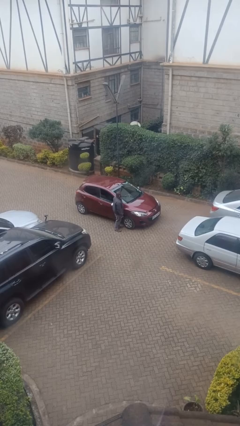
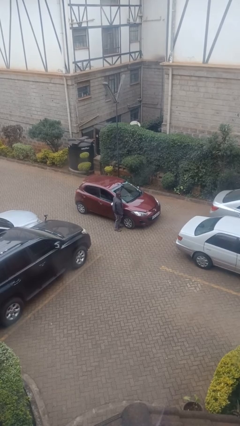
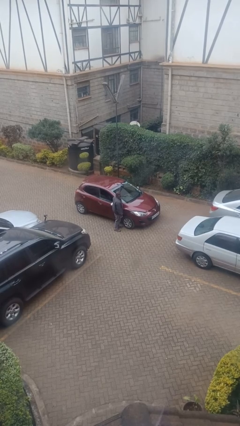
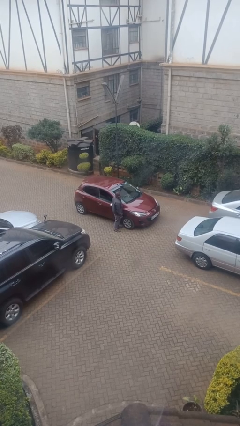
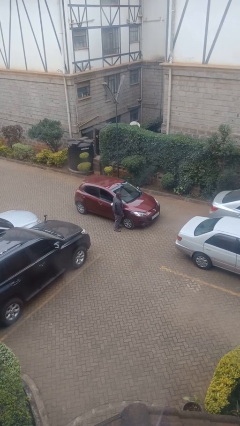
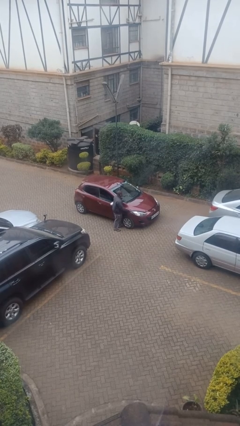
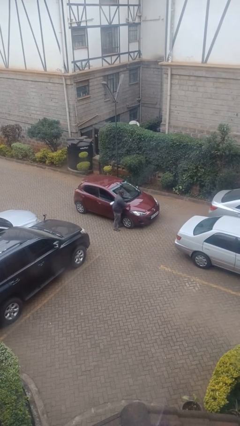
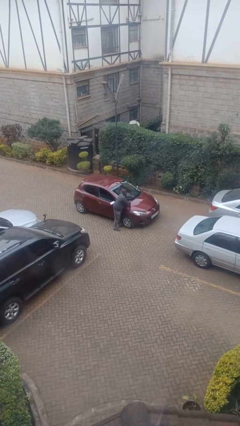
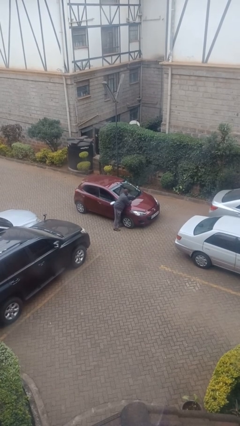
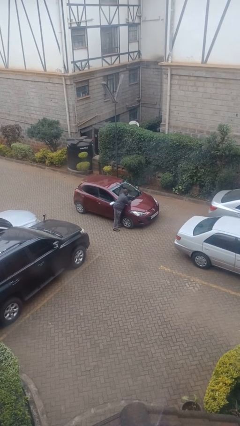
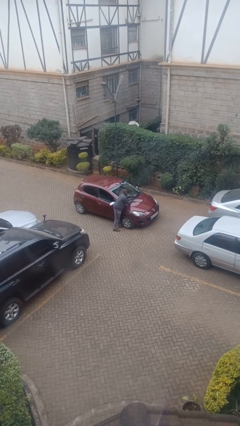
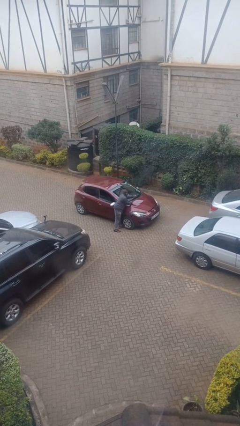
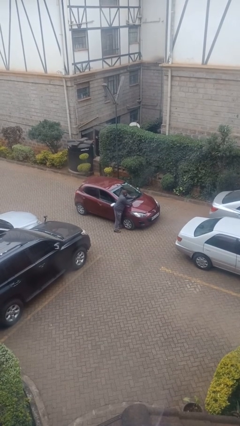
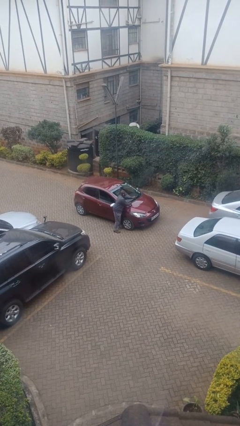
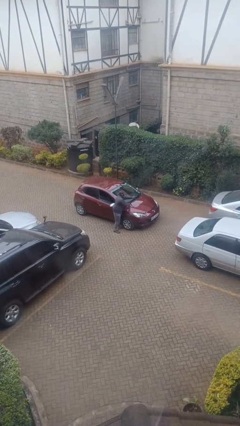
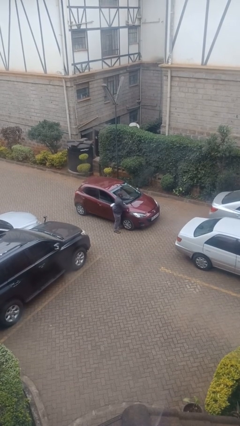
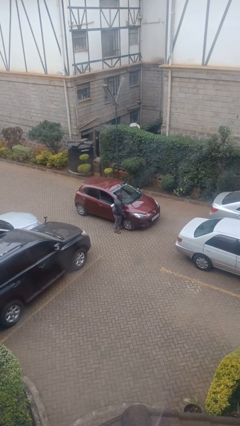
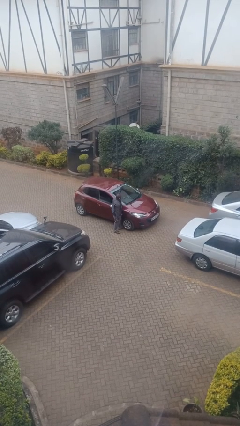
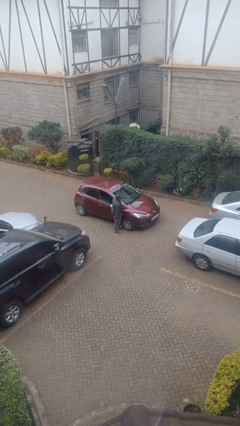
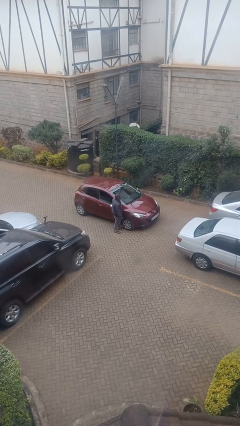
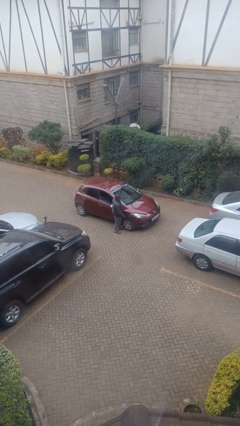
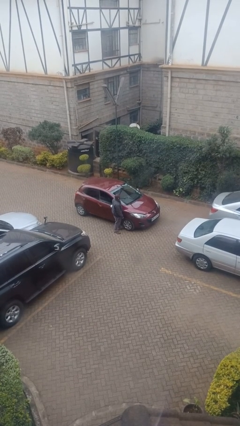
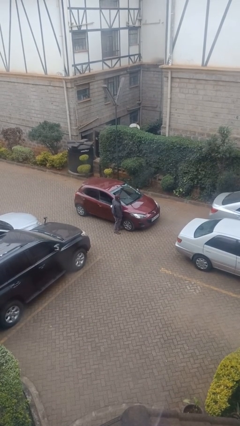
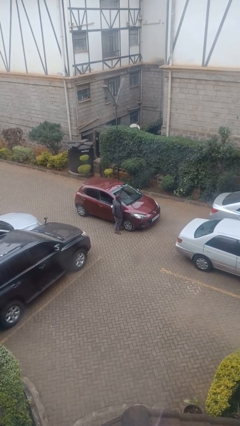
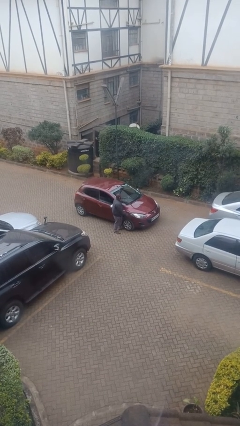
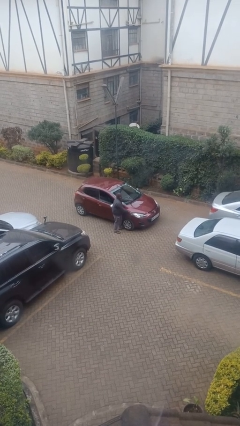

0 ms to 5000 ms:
person flips up car wipers

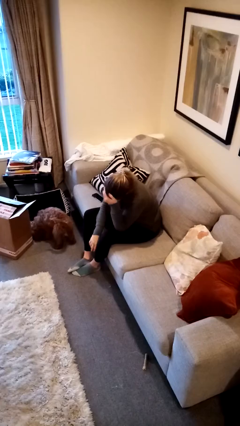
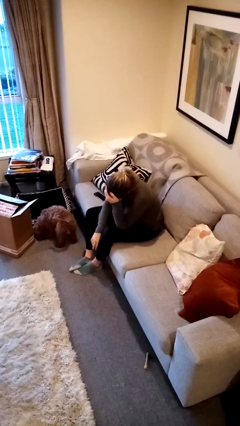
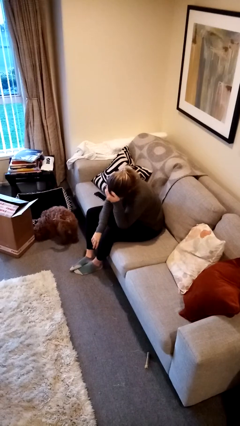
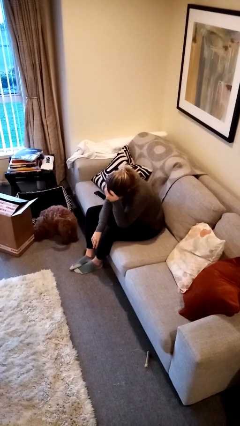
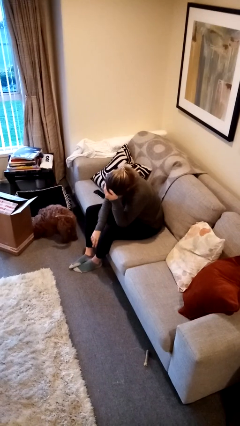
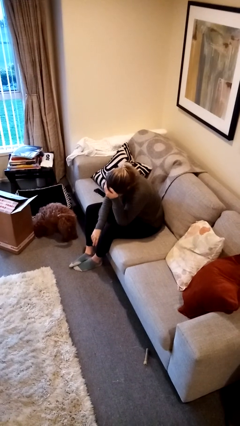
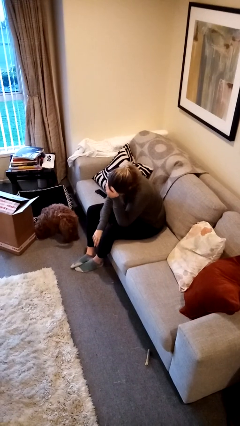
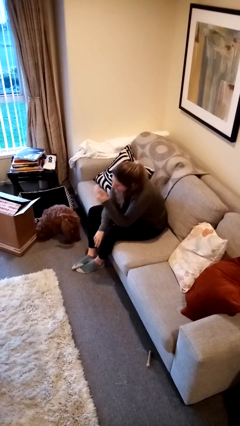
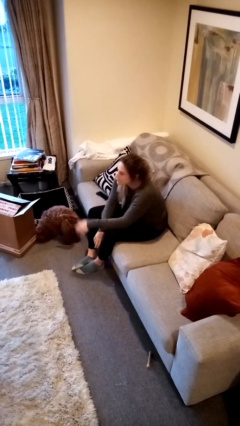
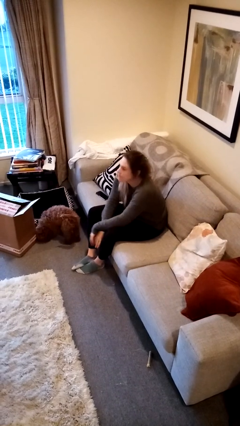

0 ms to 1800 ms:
person covers face with hands

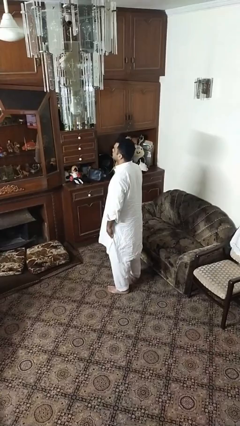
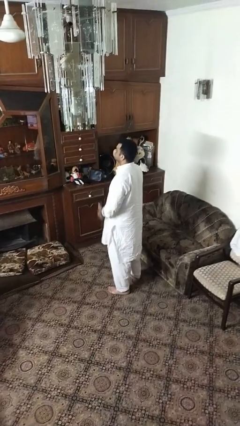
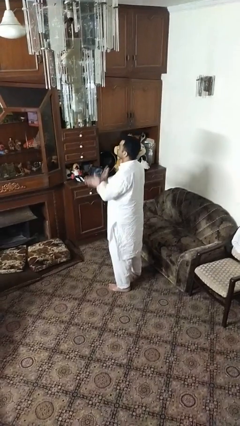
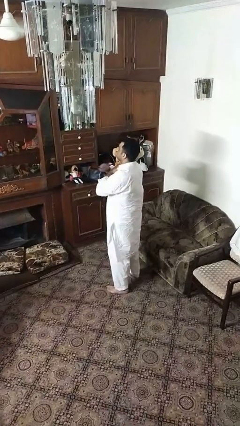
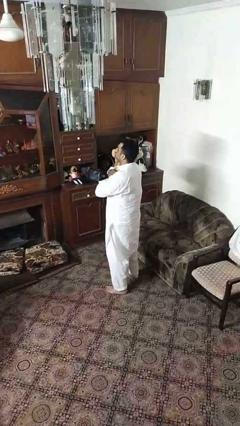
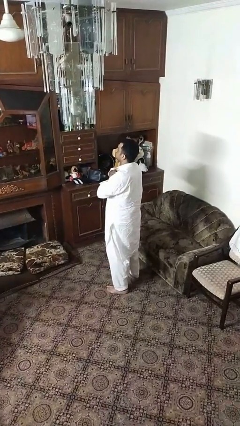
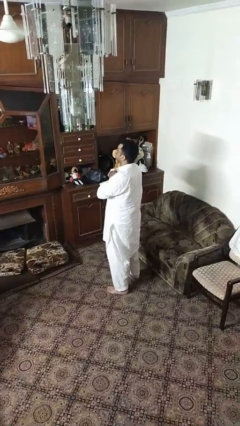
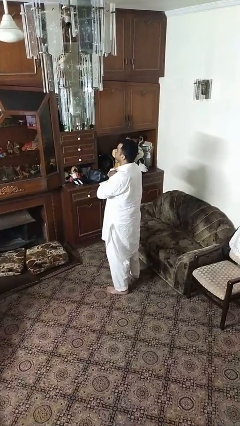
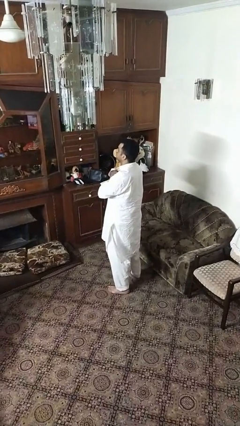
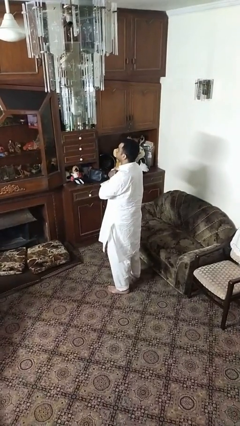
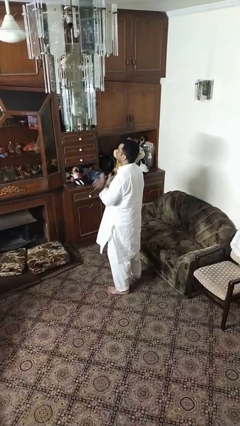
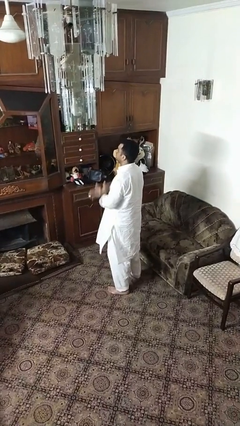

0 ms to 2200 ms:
person gestures arms x

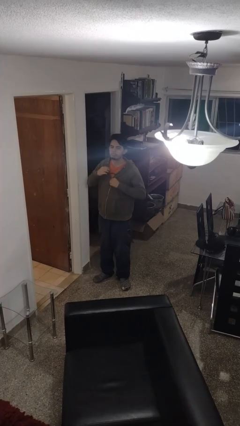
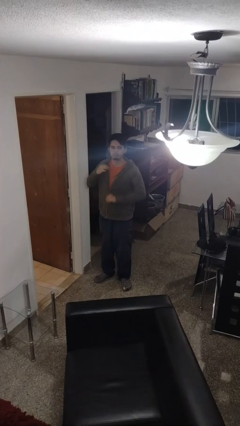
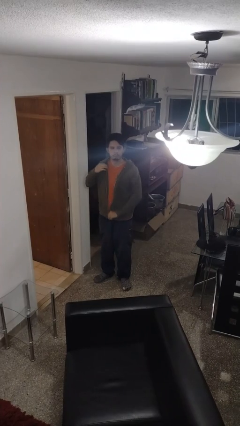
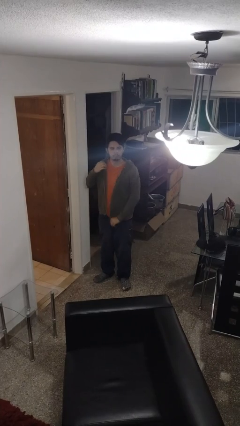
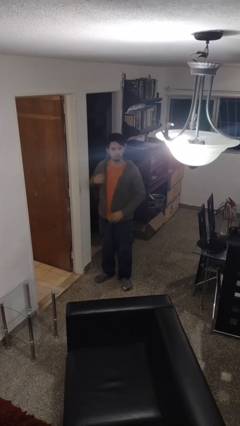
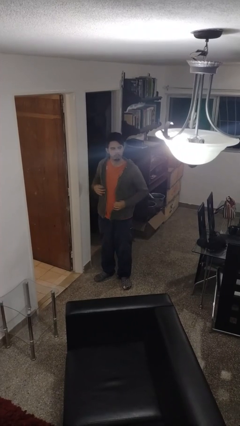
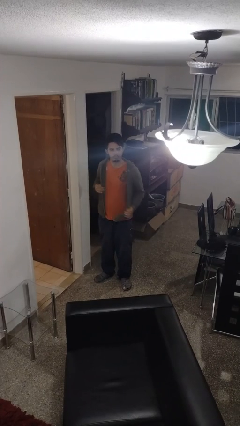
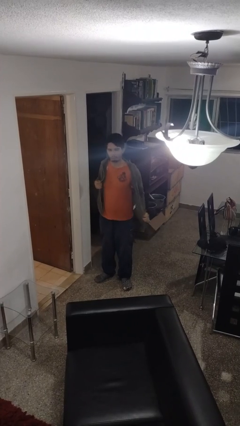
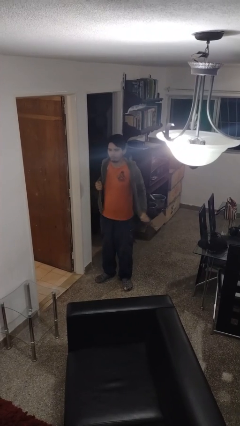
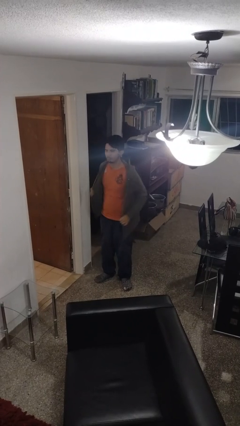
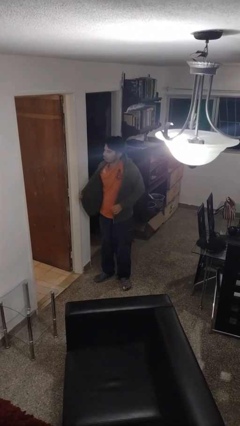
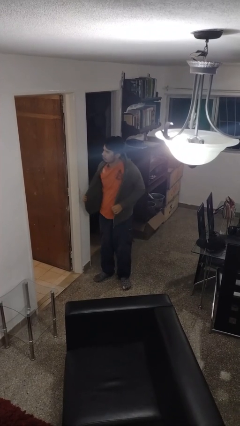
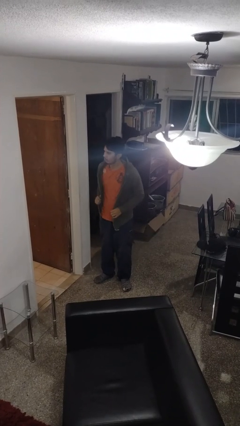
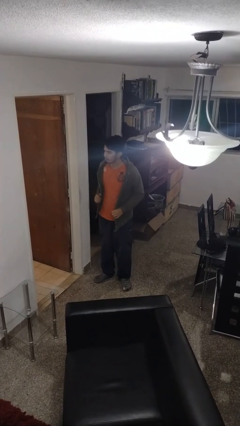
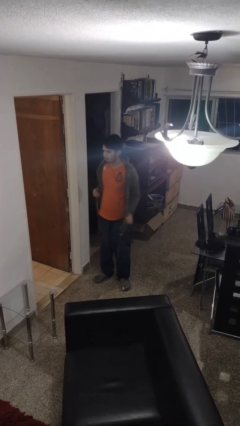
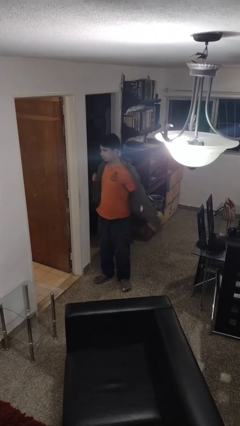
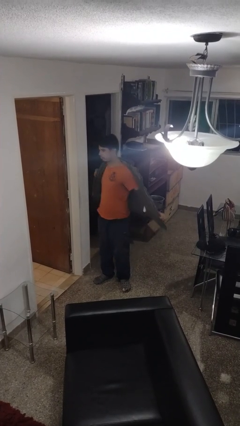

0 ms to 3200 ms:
person unzips jacket

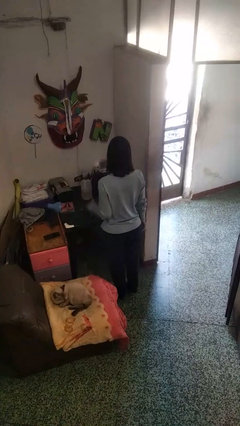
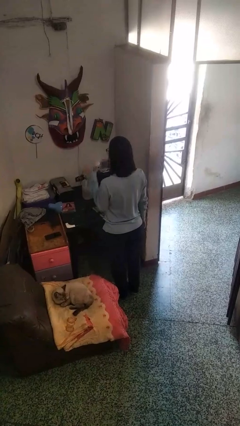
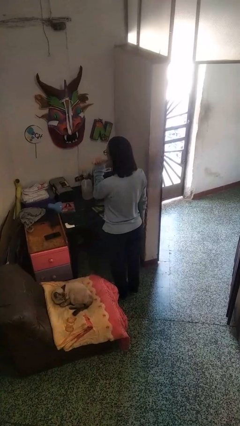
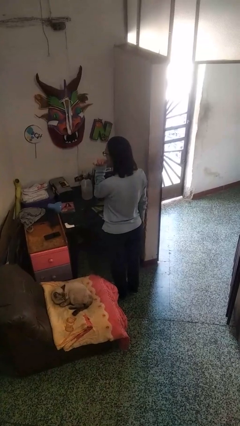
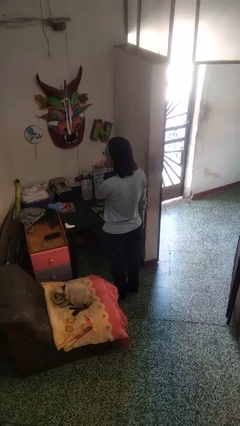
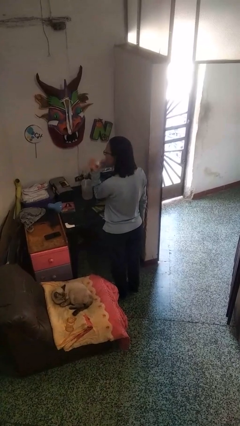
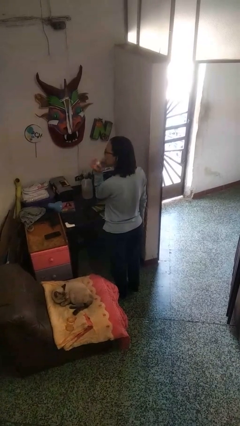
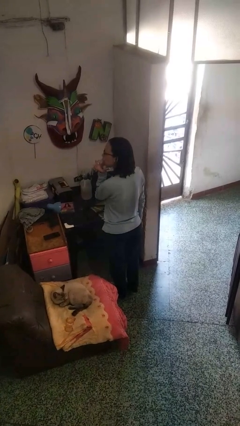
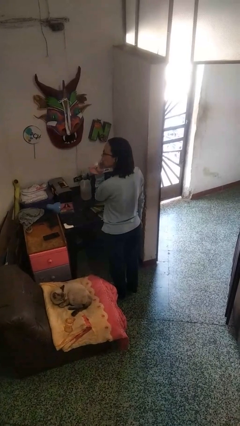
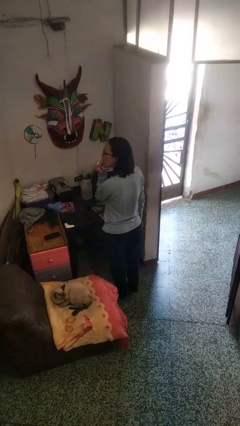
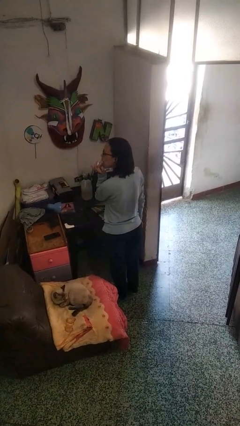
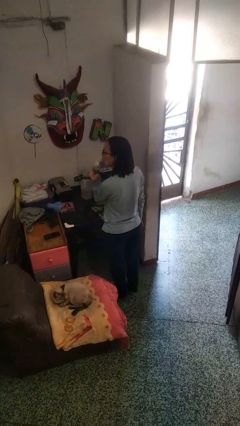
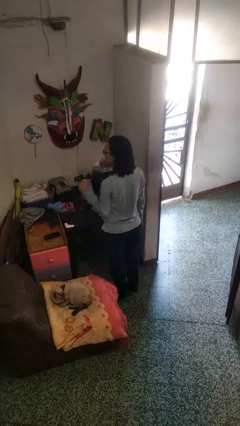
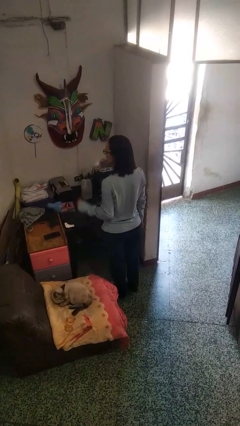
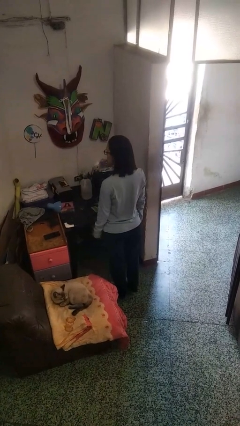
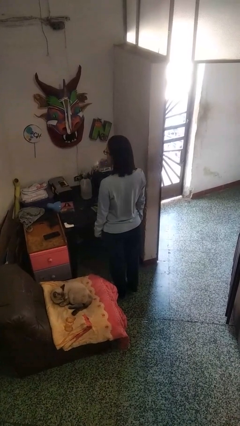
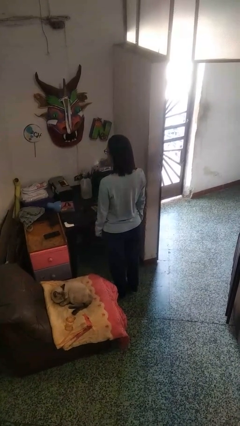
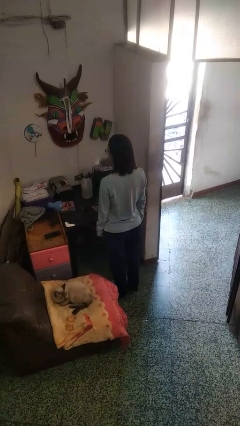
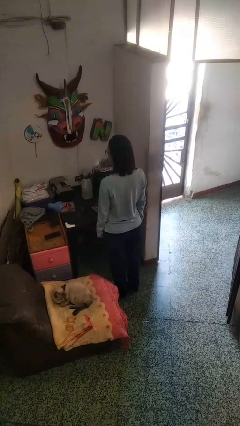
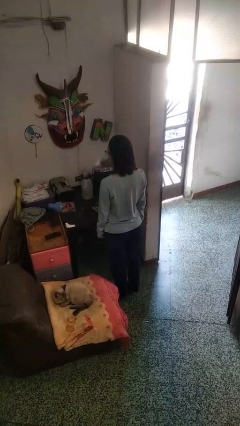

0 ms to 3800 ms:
person licks fingers

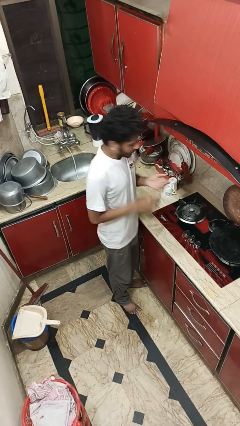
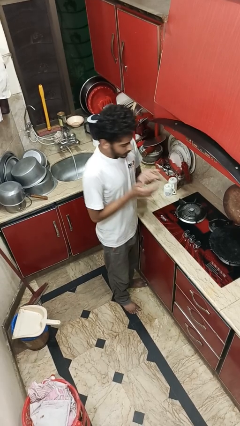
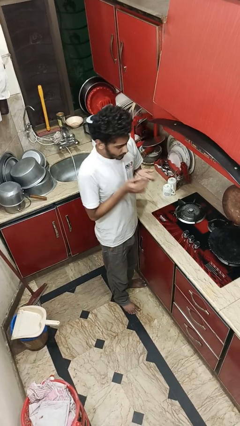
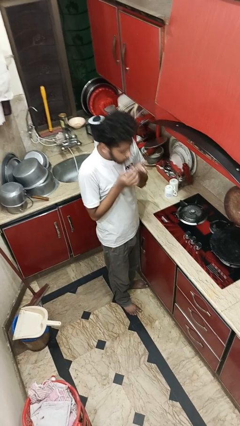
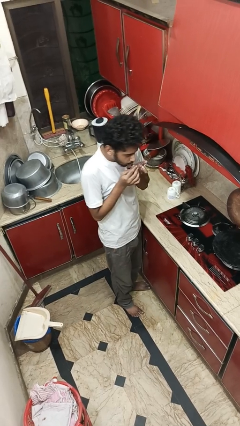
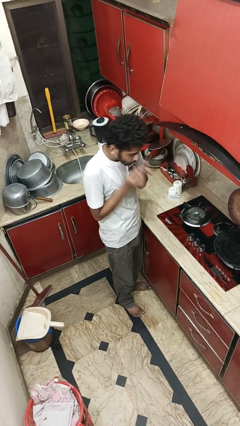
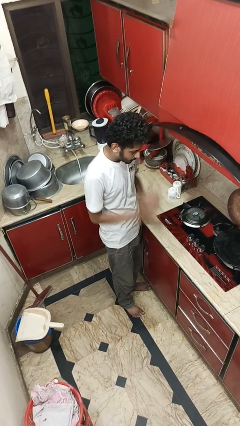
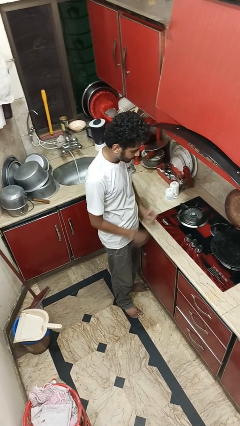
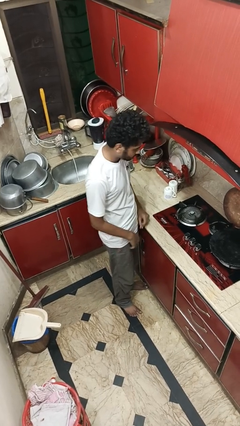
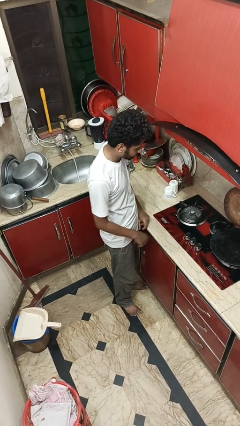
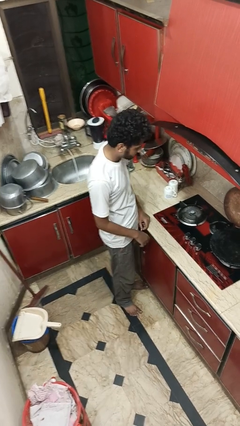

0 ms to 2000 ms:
person burns hand
